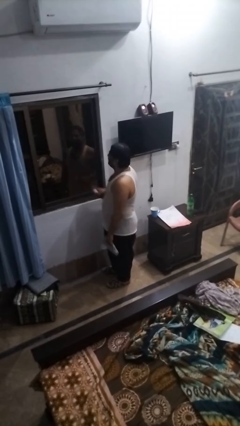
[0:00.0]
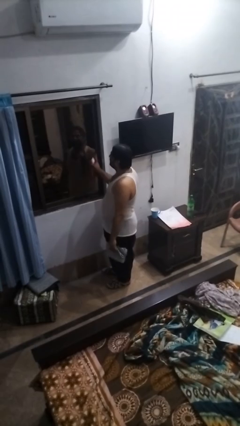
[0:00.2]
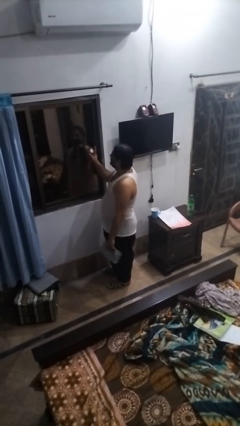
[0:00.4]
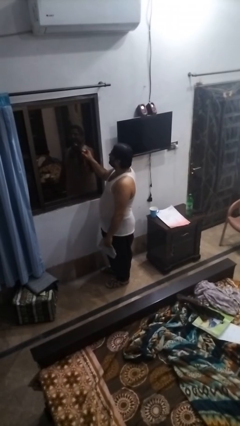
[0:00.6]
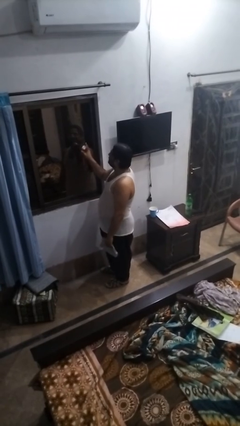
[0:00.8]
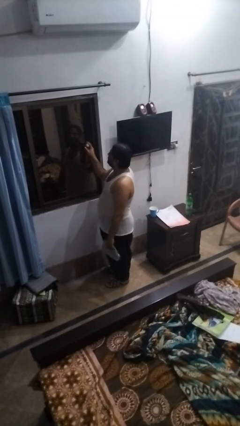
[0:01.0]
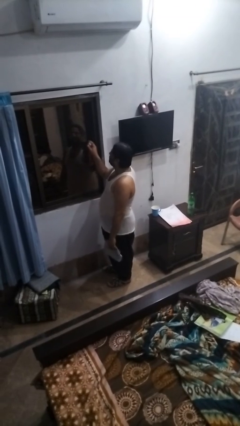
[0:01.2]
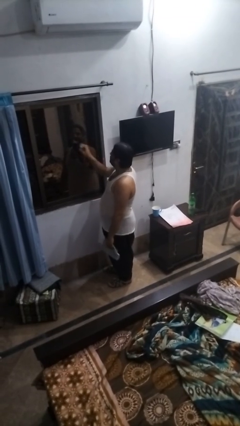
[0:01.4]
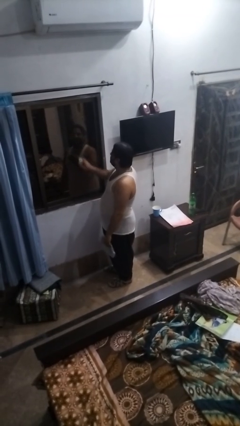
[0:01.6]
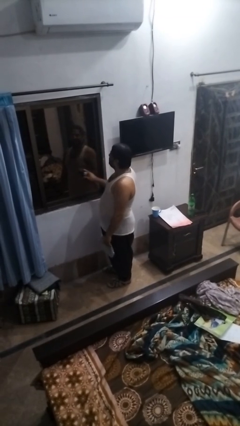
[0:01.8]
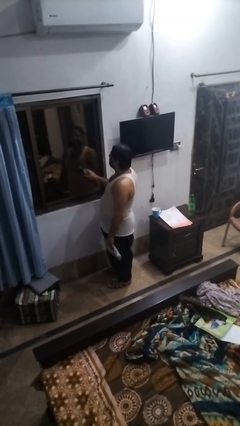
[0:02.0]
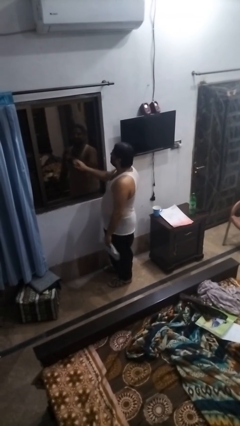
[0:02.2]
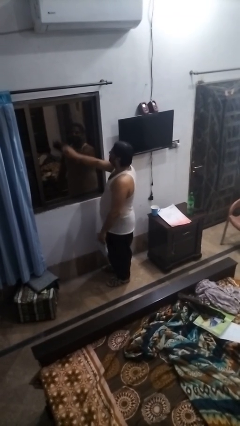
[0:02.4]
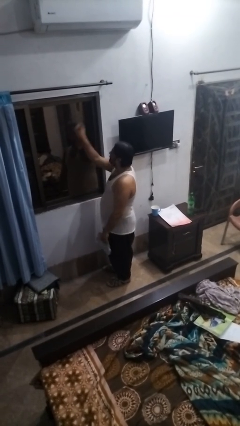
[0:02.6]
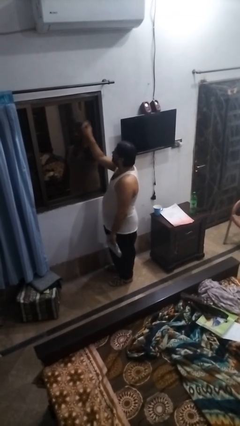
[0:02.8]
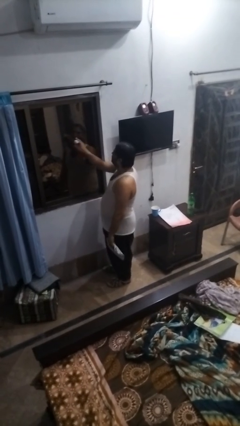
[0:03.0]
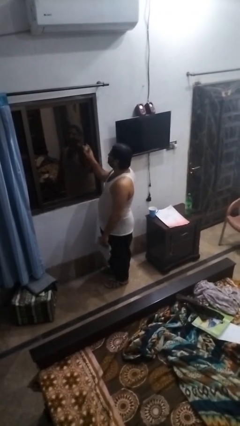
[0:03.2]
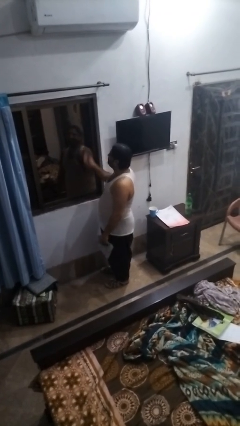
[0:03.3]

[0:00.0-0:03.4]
person sprays from bottle

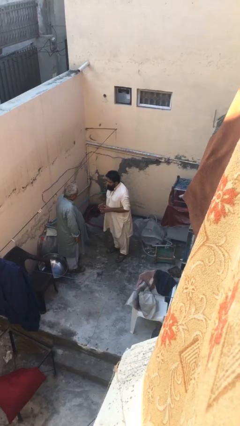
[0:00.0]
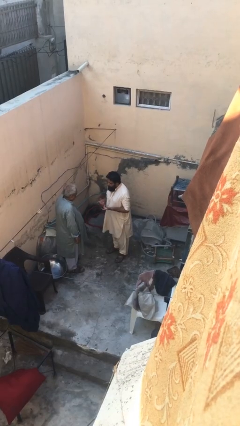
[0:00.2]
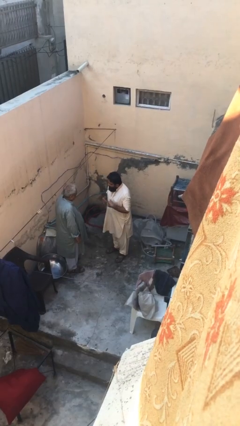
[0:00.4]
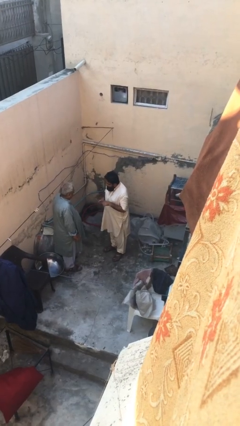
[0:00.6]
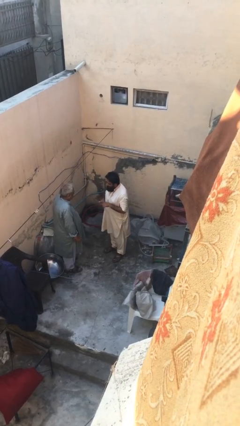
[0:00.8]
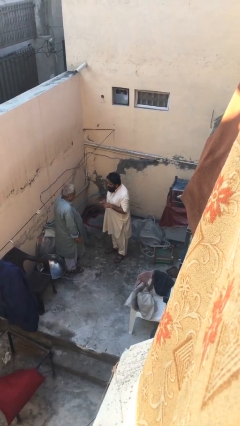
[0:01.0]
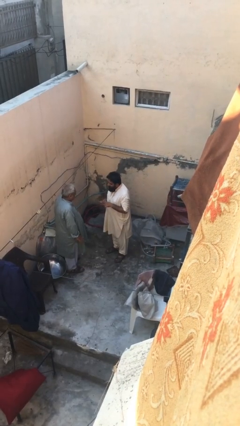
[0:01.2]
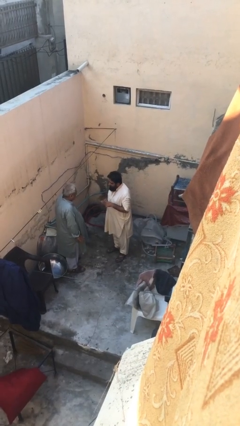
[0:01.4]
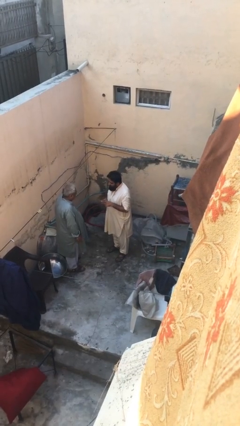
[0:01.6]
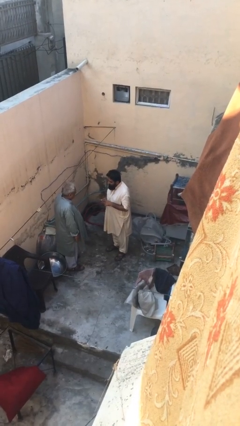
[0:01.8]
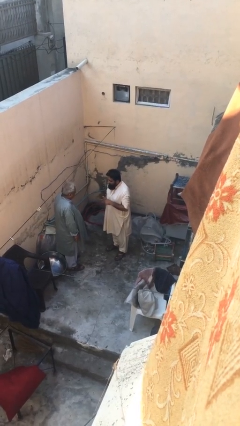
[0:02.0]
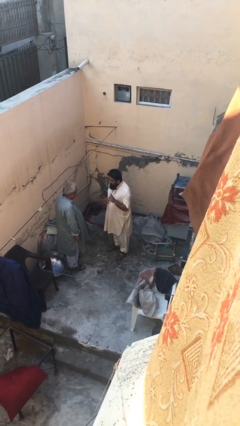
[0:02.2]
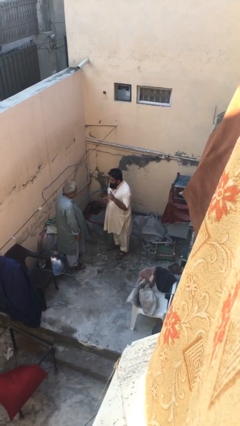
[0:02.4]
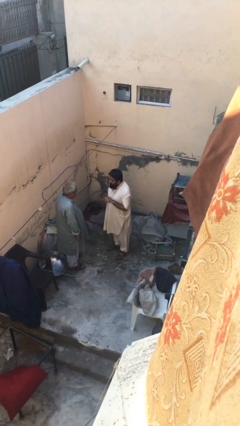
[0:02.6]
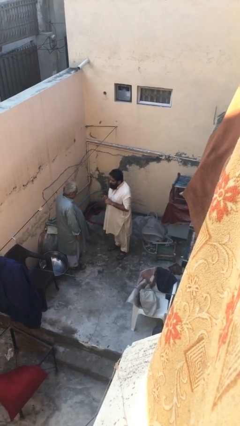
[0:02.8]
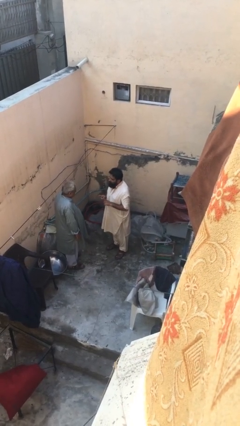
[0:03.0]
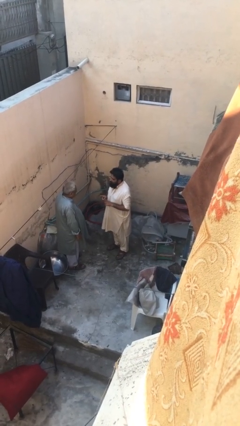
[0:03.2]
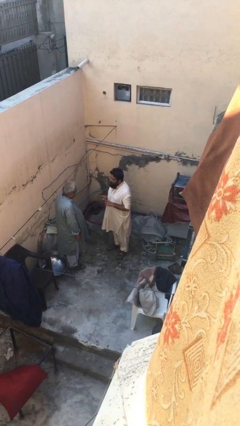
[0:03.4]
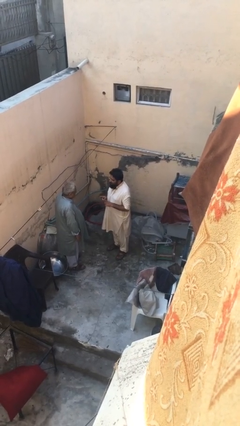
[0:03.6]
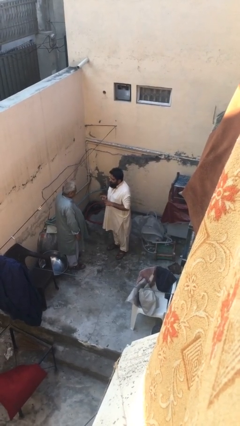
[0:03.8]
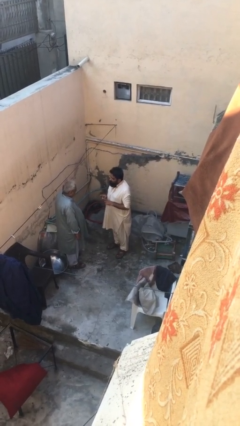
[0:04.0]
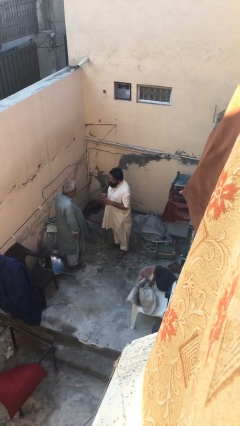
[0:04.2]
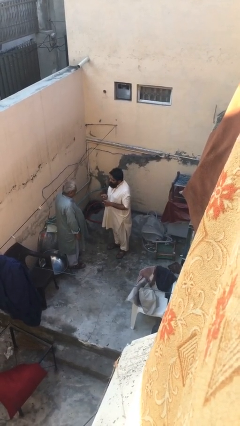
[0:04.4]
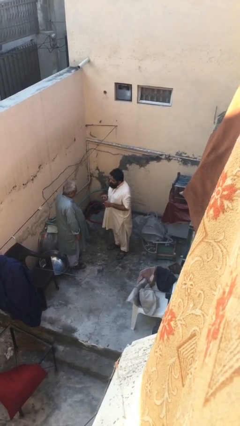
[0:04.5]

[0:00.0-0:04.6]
person talks to person

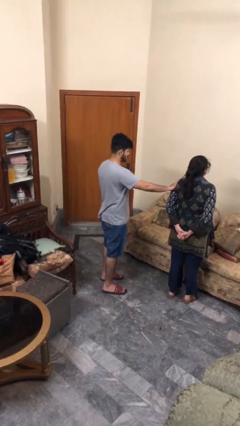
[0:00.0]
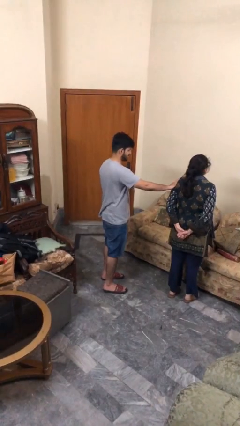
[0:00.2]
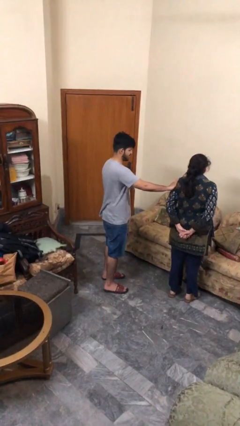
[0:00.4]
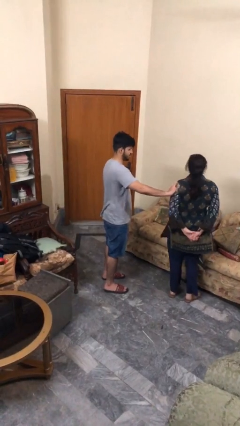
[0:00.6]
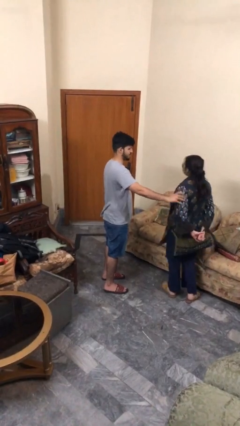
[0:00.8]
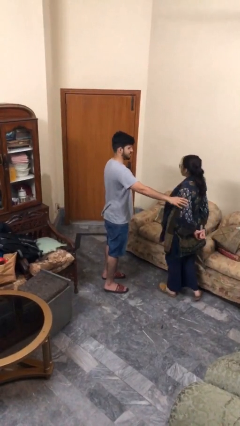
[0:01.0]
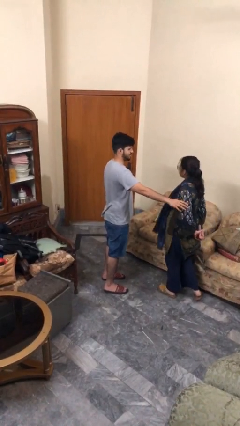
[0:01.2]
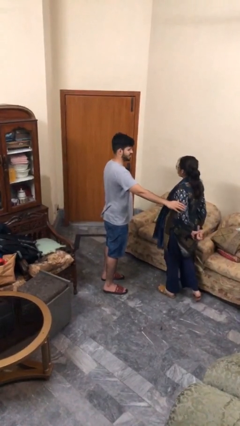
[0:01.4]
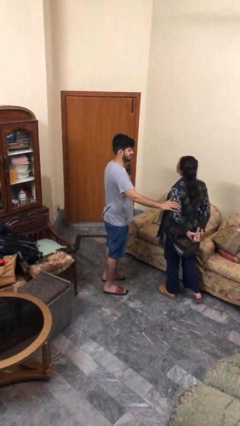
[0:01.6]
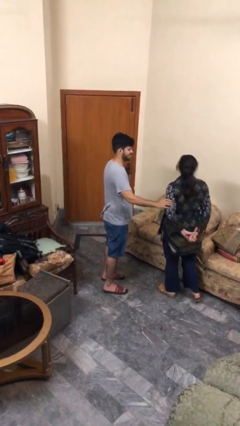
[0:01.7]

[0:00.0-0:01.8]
person spins person around

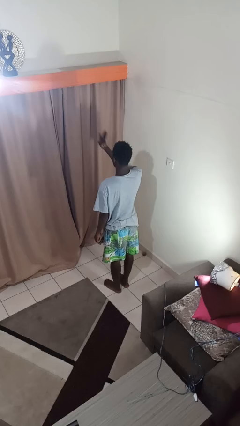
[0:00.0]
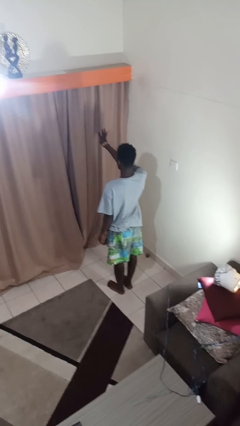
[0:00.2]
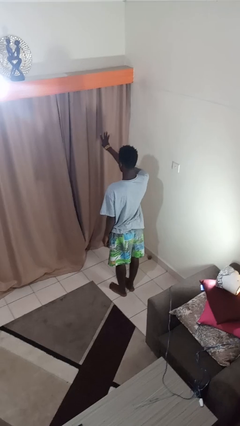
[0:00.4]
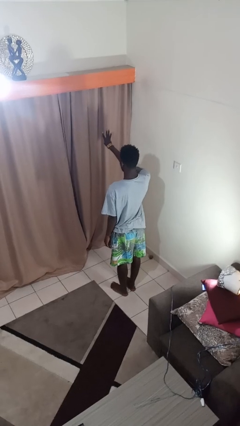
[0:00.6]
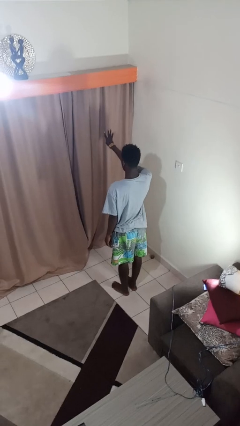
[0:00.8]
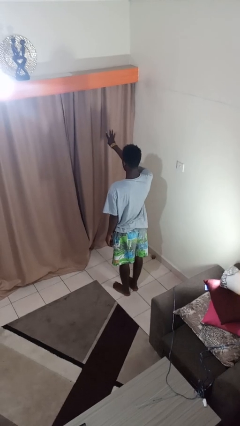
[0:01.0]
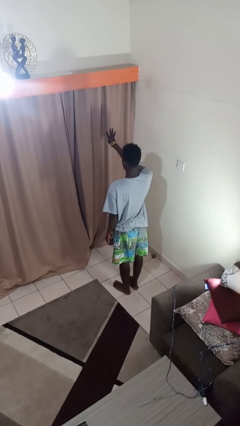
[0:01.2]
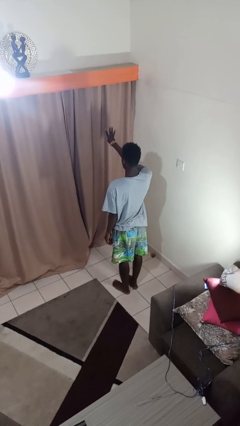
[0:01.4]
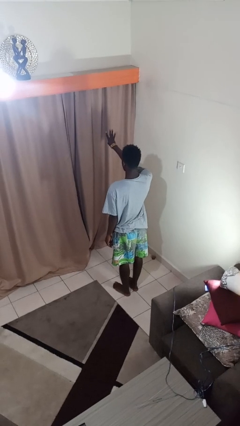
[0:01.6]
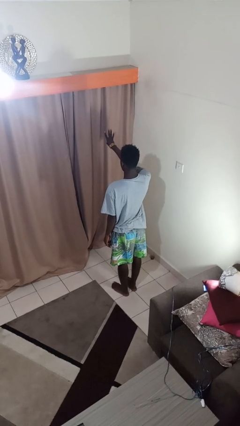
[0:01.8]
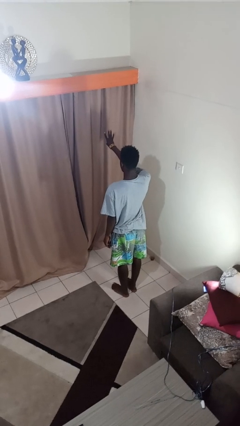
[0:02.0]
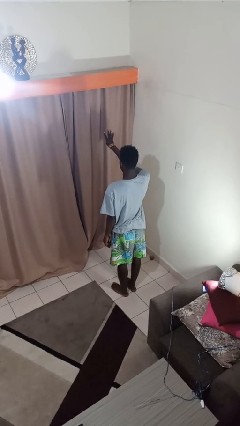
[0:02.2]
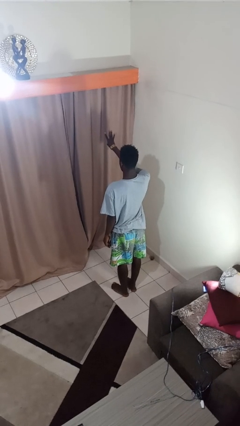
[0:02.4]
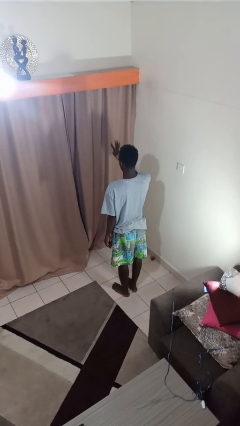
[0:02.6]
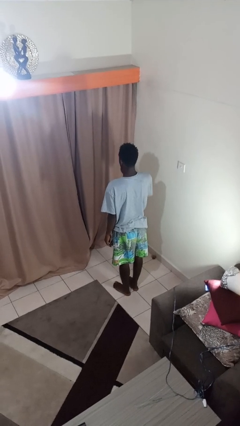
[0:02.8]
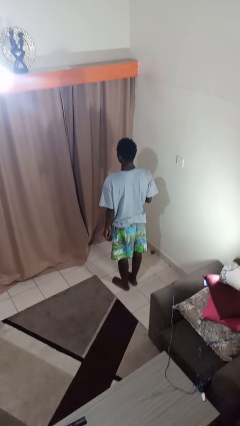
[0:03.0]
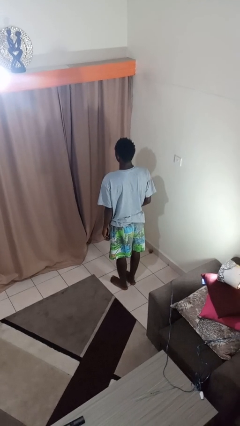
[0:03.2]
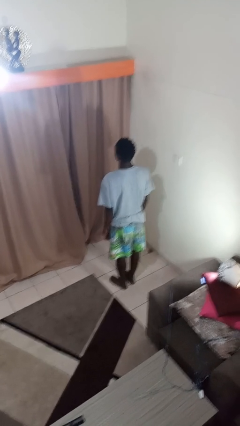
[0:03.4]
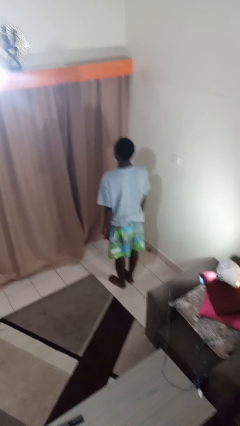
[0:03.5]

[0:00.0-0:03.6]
person gestures number four

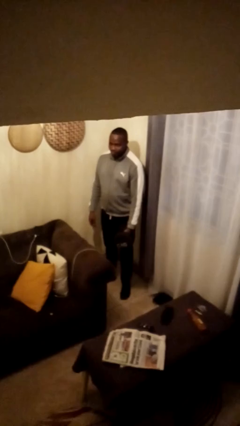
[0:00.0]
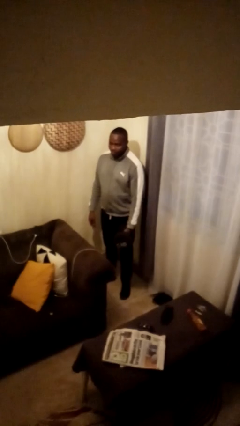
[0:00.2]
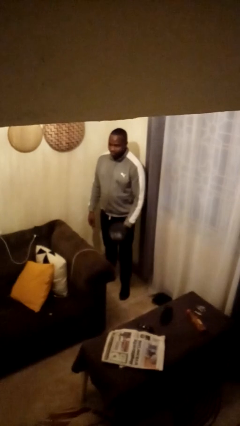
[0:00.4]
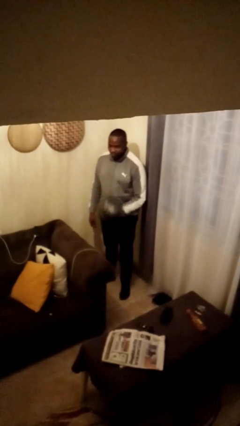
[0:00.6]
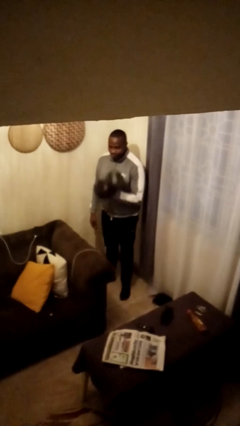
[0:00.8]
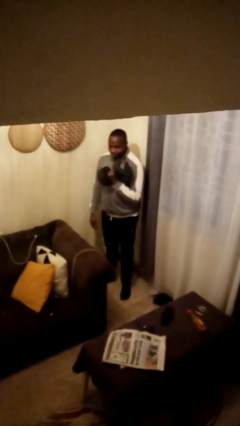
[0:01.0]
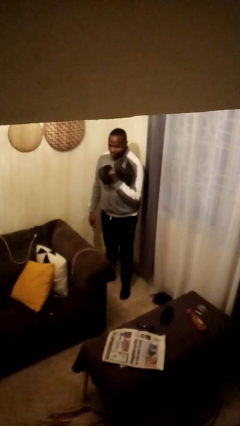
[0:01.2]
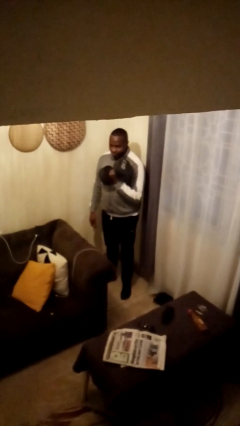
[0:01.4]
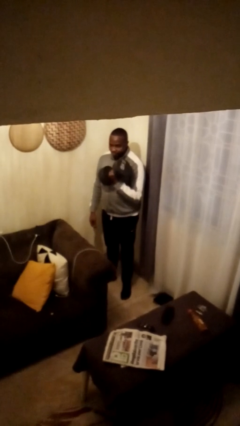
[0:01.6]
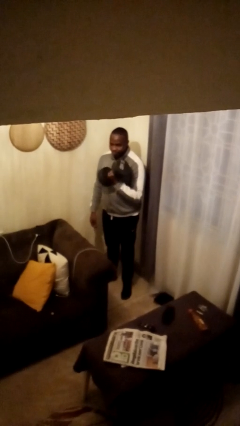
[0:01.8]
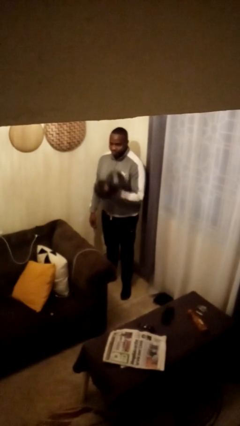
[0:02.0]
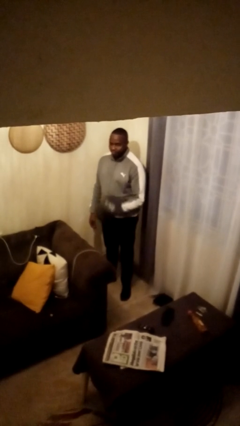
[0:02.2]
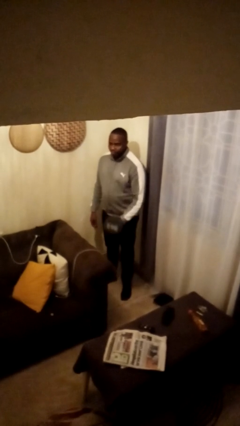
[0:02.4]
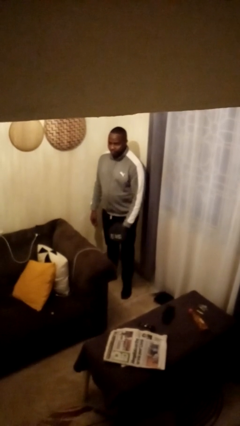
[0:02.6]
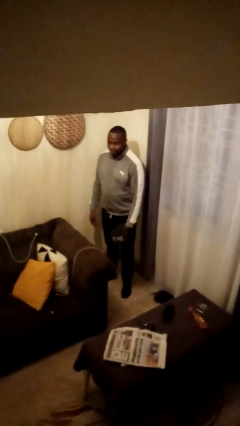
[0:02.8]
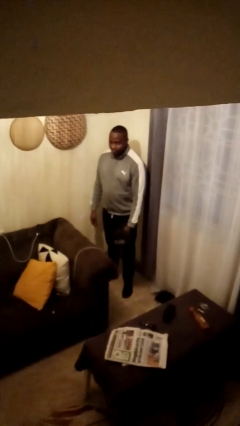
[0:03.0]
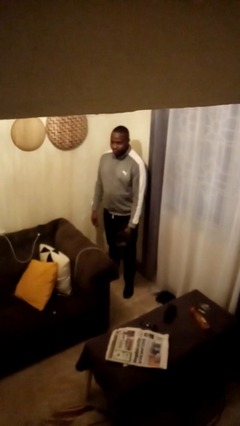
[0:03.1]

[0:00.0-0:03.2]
person lifts dumbbells

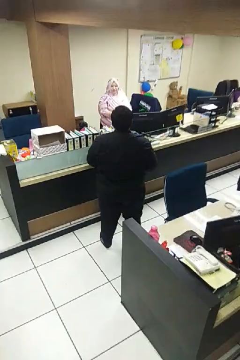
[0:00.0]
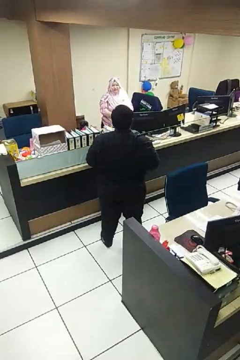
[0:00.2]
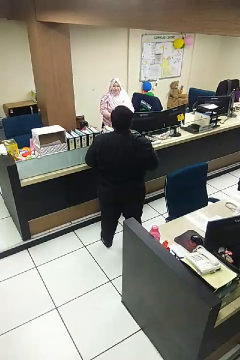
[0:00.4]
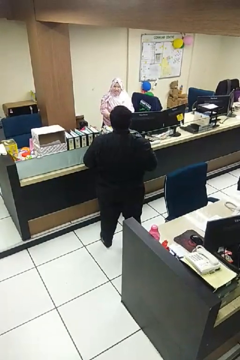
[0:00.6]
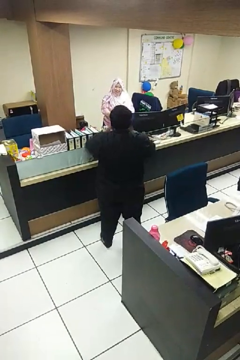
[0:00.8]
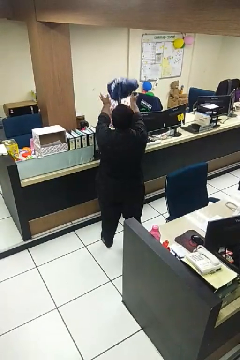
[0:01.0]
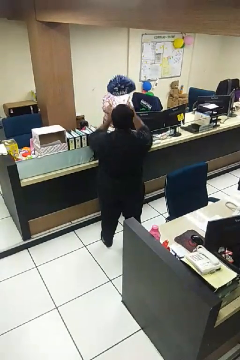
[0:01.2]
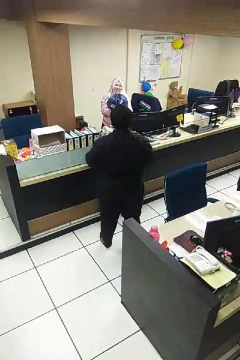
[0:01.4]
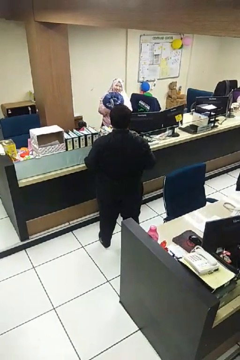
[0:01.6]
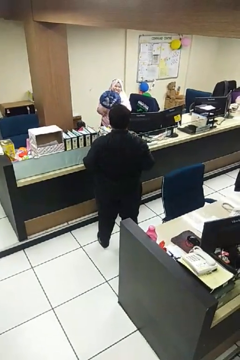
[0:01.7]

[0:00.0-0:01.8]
person throws object to person
